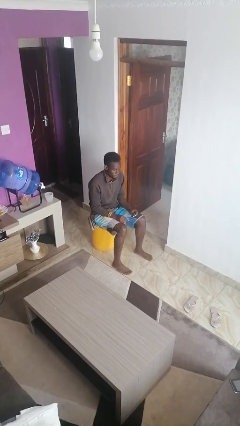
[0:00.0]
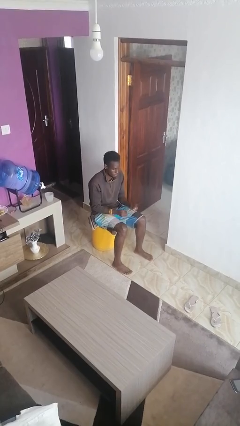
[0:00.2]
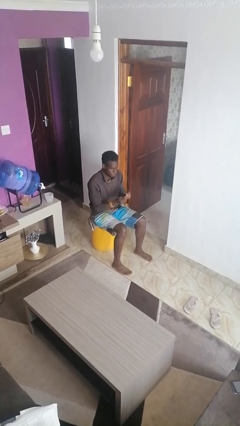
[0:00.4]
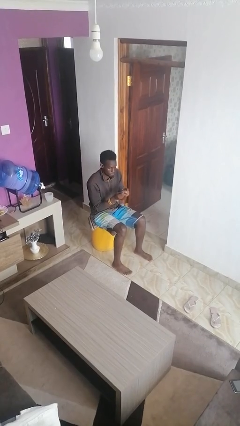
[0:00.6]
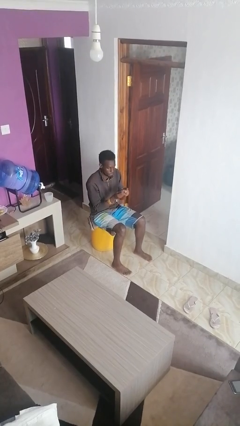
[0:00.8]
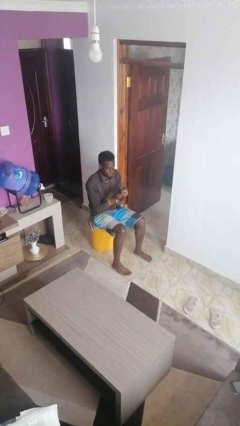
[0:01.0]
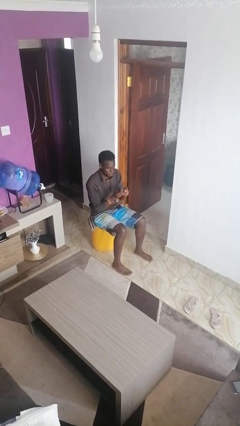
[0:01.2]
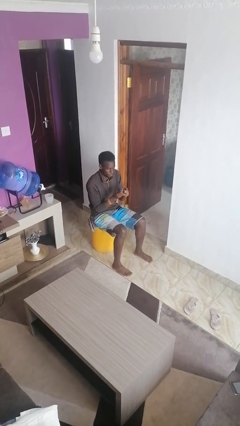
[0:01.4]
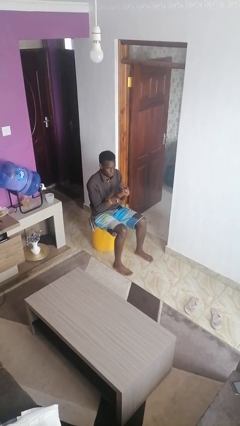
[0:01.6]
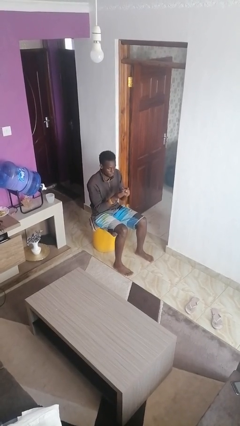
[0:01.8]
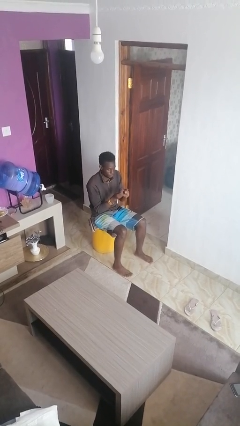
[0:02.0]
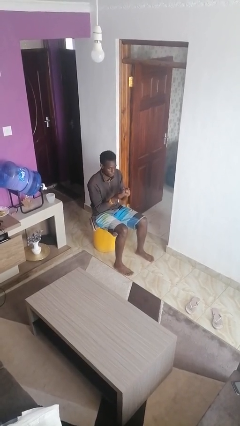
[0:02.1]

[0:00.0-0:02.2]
person files fingernails

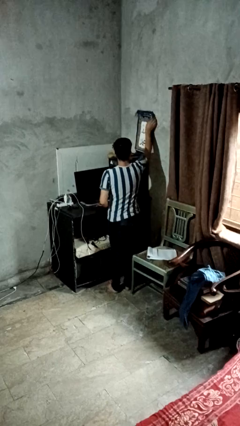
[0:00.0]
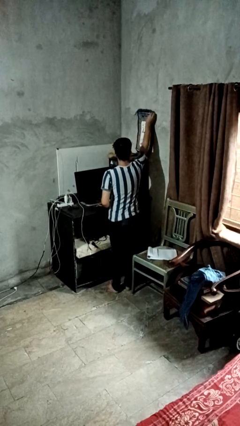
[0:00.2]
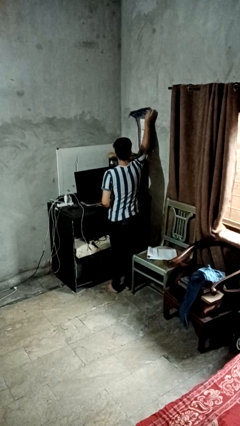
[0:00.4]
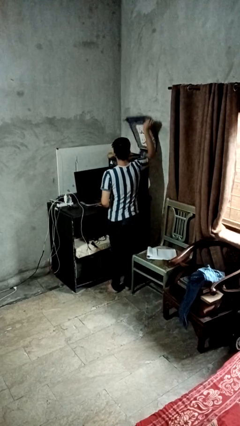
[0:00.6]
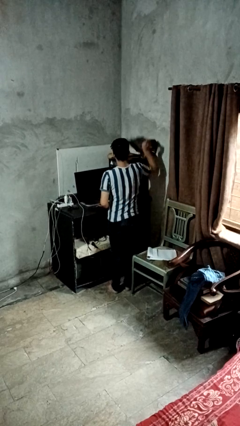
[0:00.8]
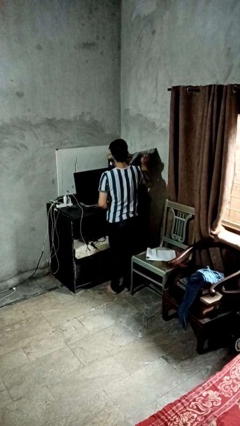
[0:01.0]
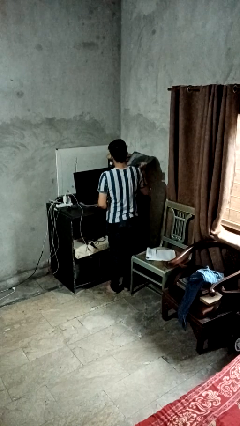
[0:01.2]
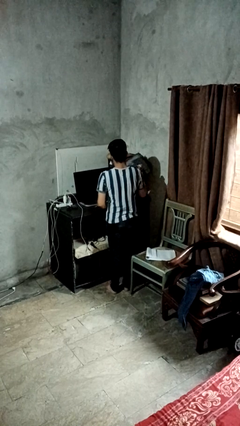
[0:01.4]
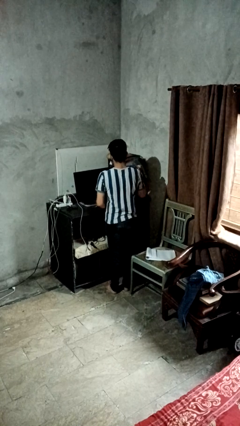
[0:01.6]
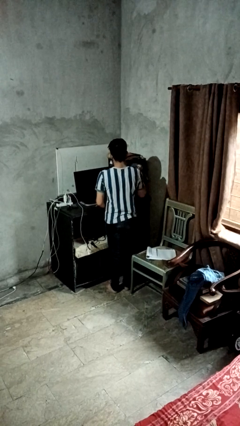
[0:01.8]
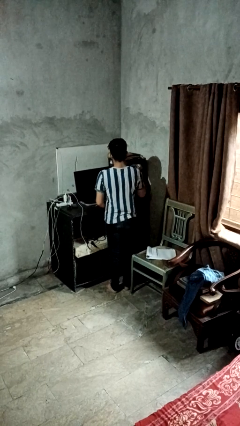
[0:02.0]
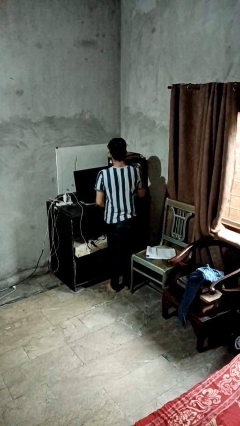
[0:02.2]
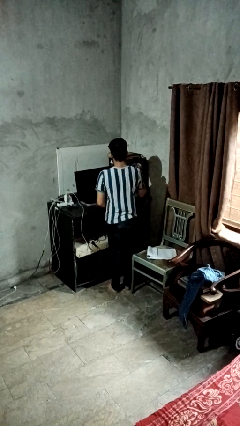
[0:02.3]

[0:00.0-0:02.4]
person takes down picture frame

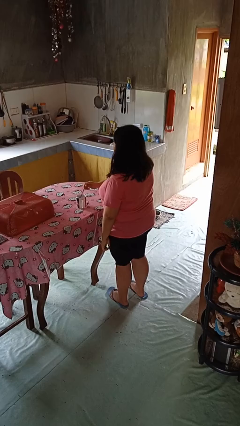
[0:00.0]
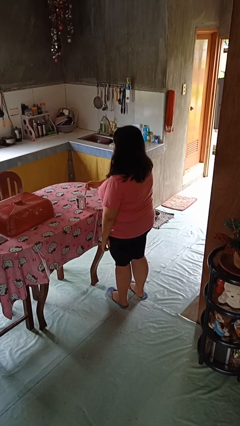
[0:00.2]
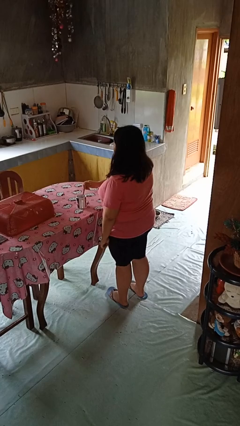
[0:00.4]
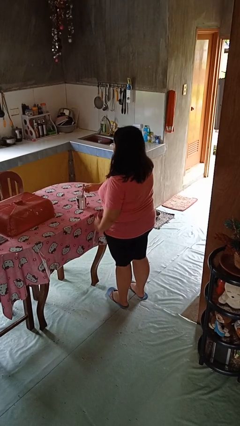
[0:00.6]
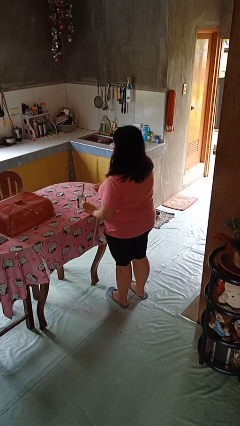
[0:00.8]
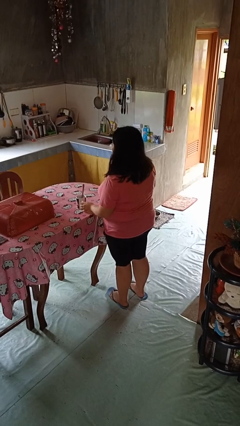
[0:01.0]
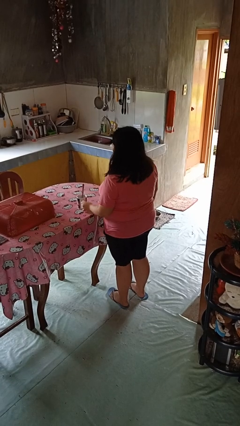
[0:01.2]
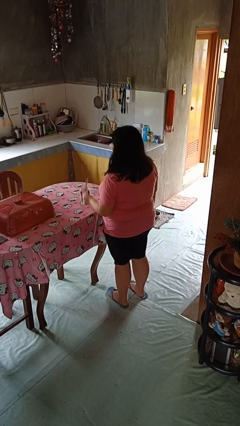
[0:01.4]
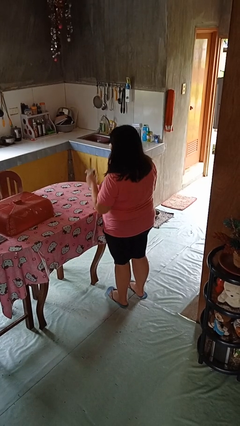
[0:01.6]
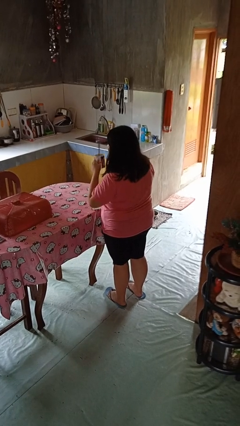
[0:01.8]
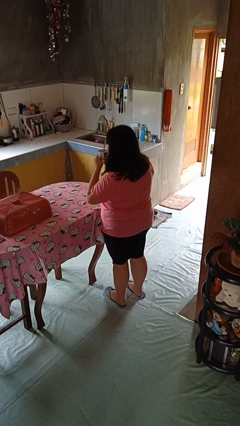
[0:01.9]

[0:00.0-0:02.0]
person stirs mug

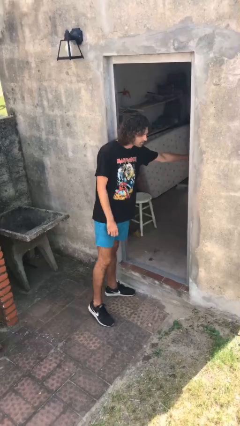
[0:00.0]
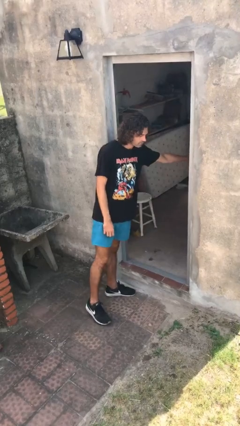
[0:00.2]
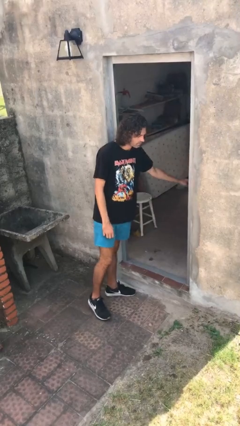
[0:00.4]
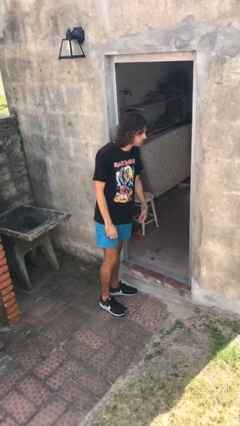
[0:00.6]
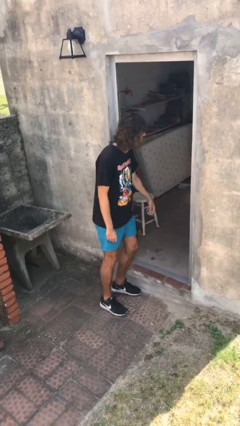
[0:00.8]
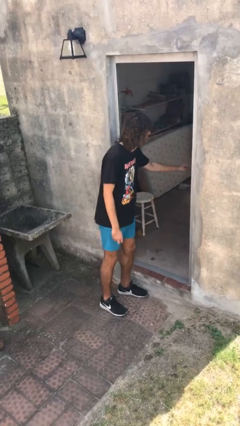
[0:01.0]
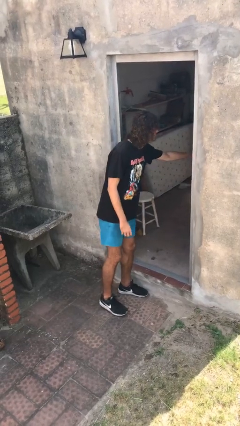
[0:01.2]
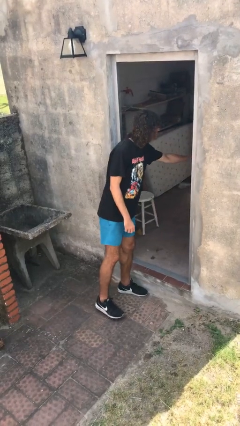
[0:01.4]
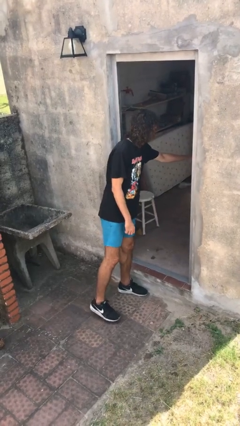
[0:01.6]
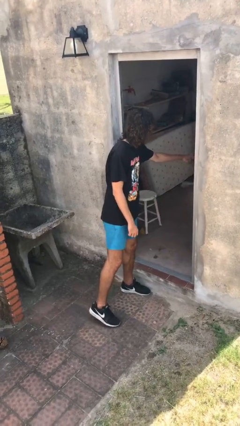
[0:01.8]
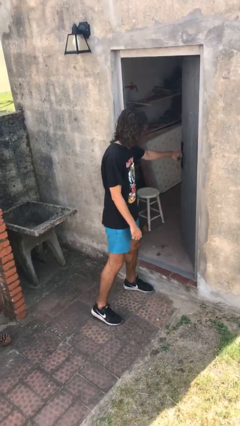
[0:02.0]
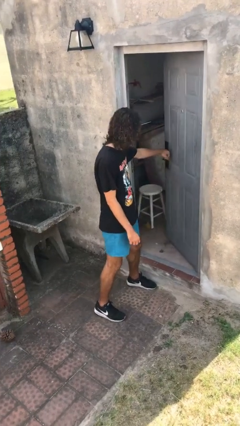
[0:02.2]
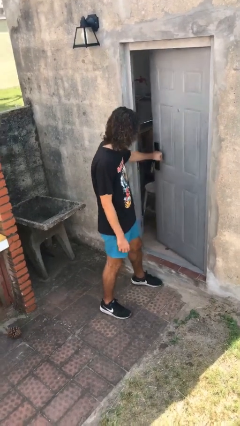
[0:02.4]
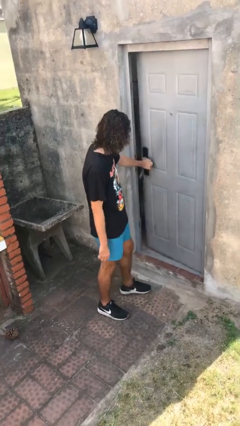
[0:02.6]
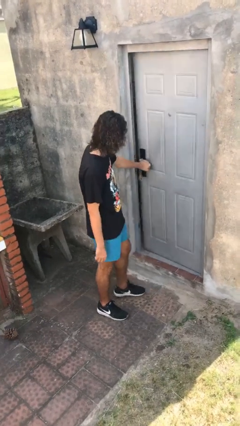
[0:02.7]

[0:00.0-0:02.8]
person closes facility door

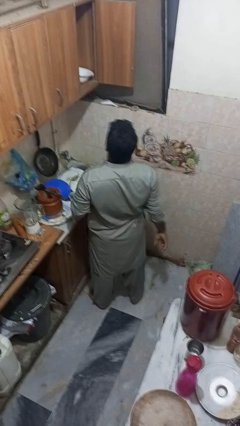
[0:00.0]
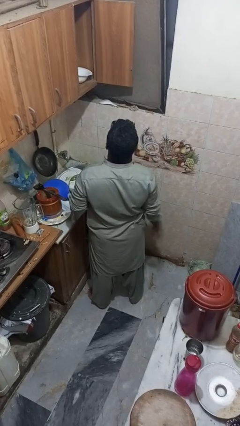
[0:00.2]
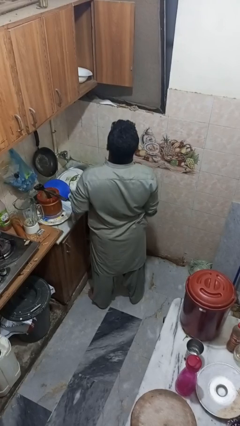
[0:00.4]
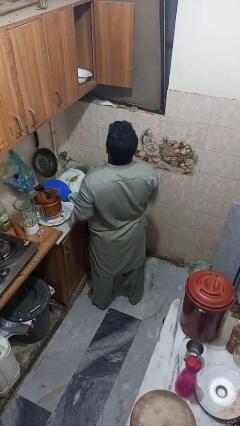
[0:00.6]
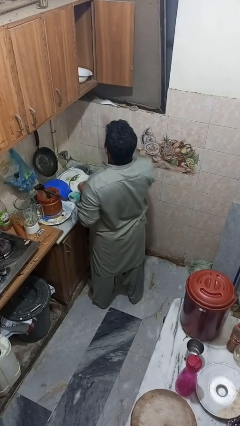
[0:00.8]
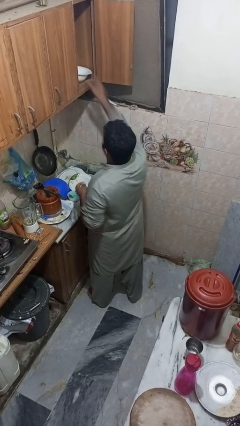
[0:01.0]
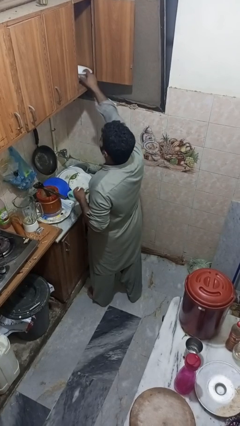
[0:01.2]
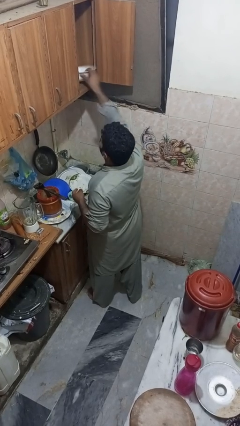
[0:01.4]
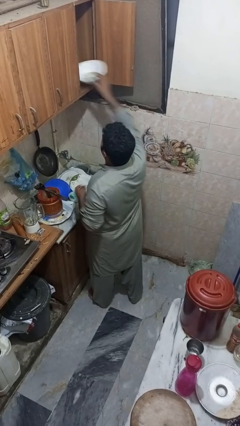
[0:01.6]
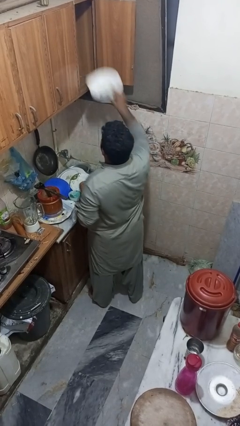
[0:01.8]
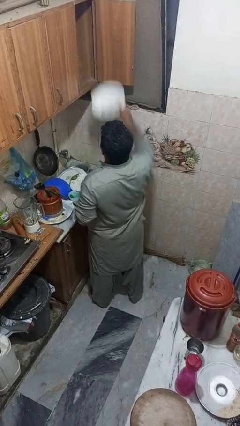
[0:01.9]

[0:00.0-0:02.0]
person takes object from cabinet

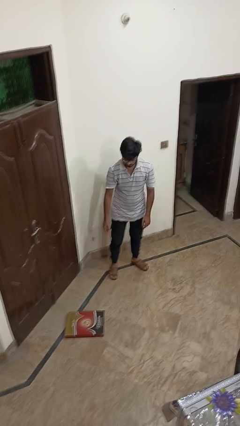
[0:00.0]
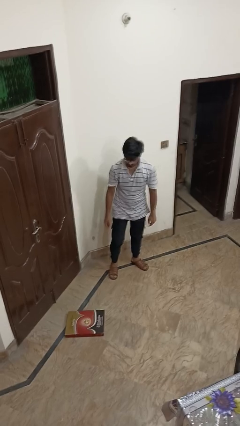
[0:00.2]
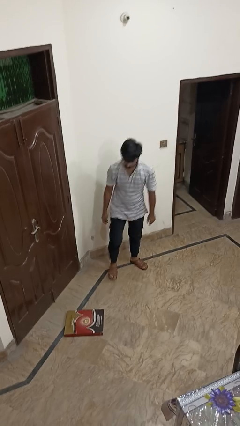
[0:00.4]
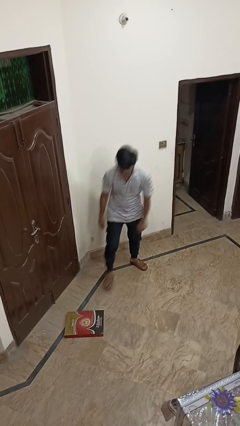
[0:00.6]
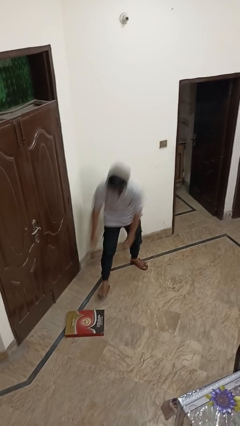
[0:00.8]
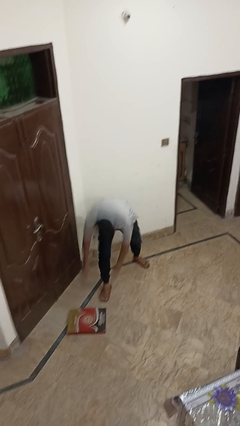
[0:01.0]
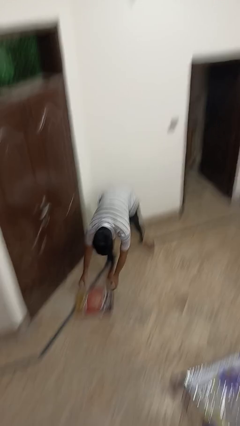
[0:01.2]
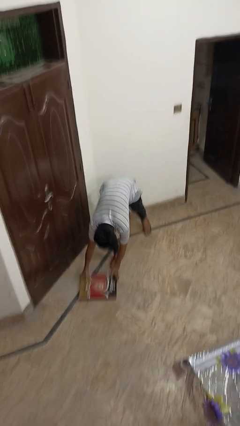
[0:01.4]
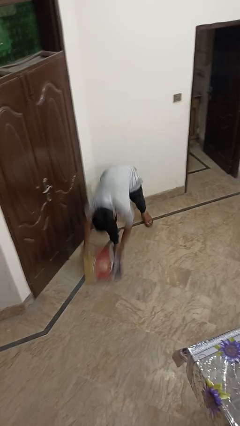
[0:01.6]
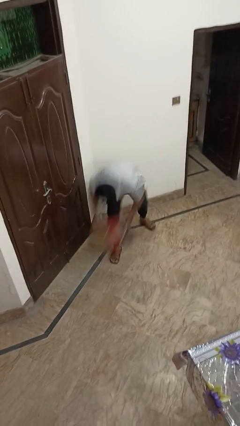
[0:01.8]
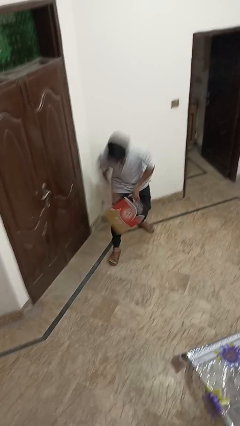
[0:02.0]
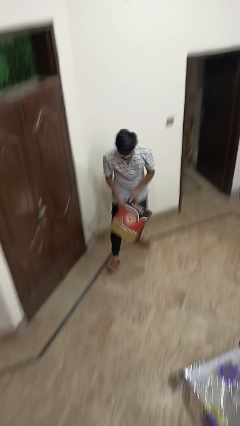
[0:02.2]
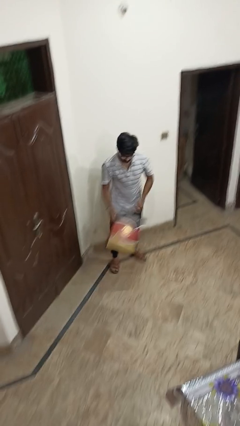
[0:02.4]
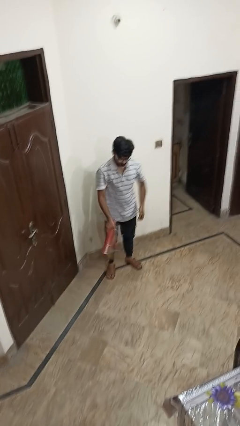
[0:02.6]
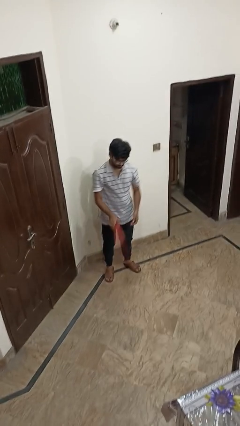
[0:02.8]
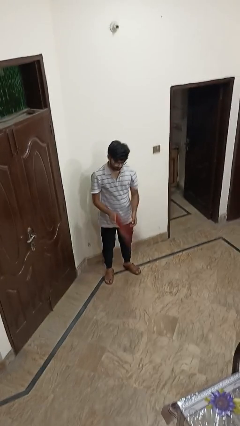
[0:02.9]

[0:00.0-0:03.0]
person picks up object from floor

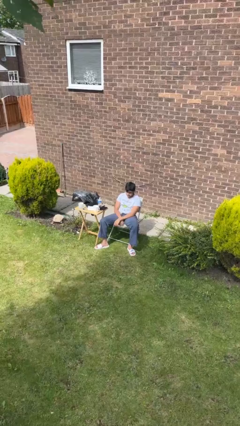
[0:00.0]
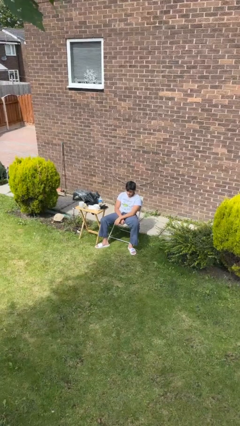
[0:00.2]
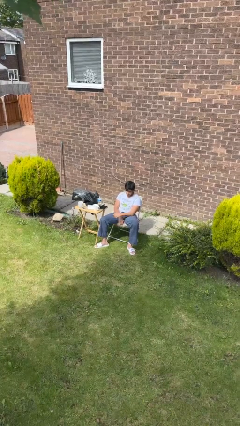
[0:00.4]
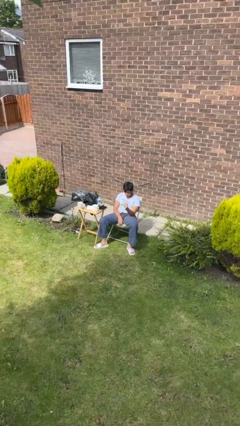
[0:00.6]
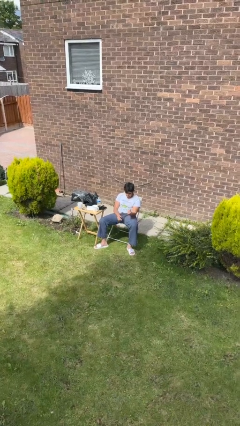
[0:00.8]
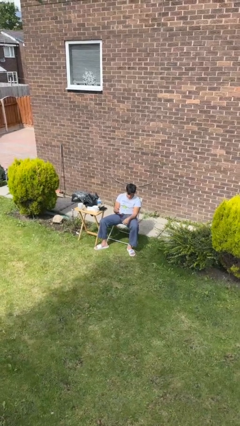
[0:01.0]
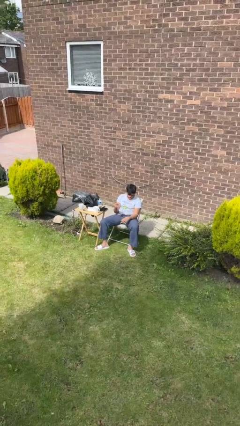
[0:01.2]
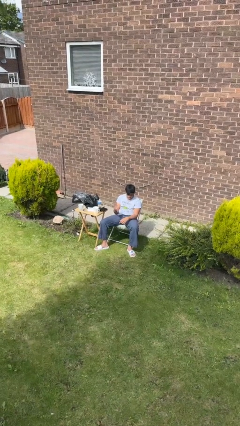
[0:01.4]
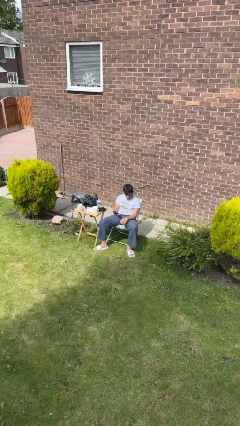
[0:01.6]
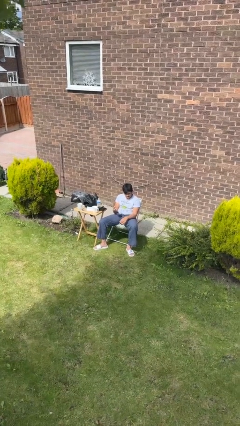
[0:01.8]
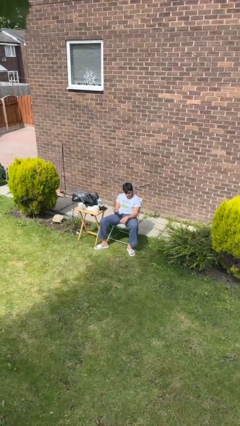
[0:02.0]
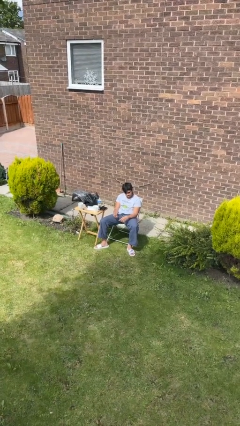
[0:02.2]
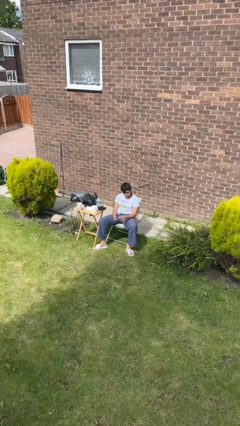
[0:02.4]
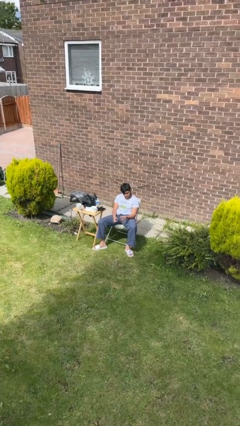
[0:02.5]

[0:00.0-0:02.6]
person snaps fingers
